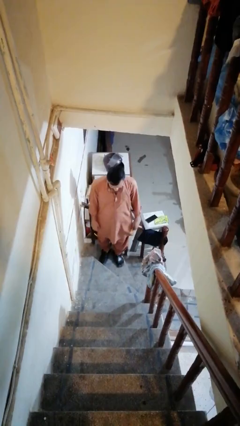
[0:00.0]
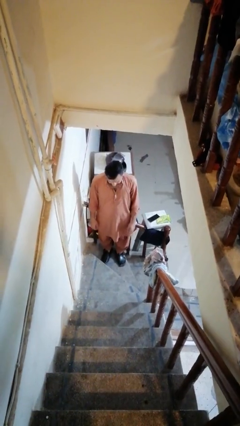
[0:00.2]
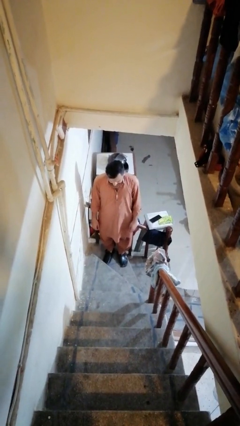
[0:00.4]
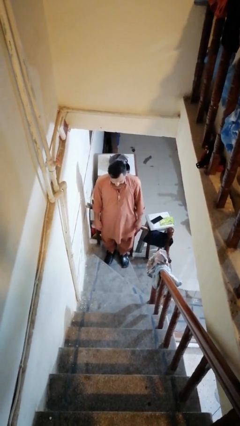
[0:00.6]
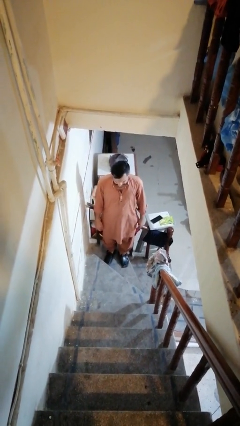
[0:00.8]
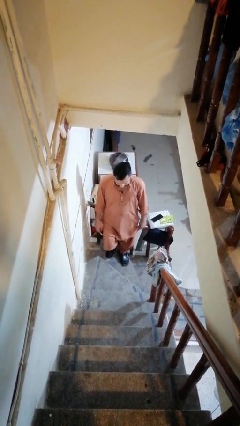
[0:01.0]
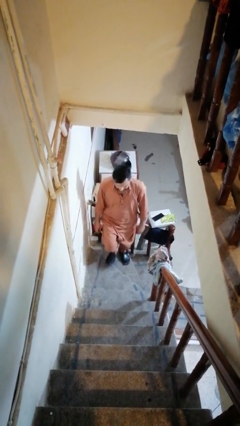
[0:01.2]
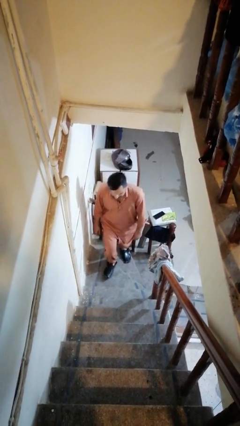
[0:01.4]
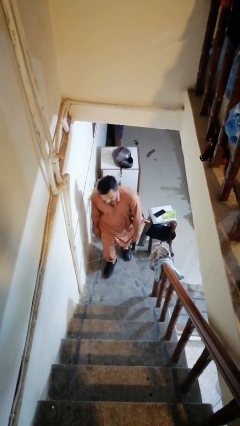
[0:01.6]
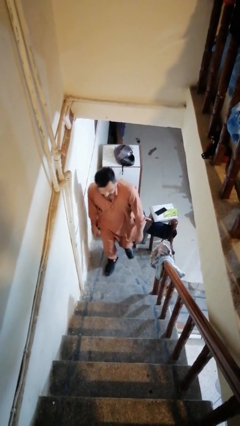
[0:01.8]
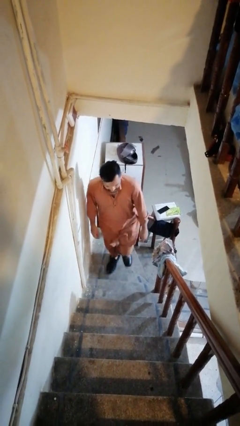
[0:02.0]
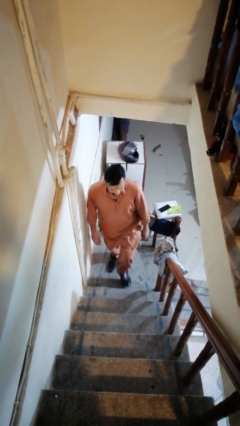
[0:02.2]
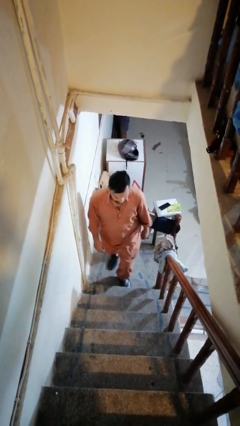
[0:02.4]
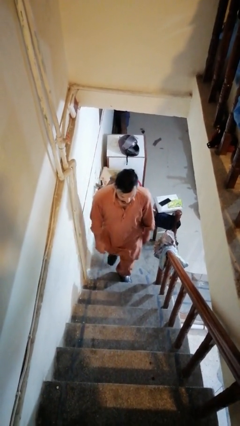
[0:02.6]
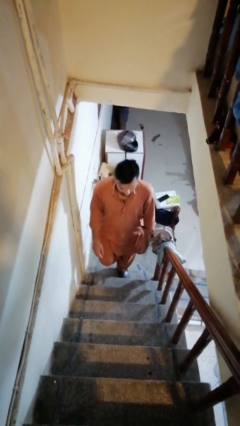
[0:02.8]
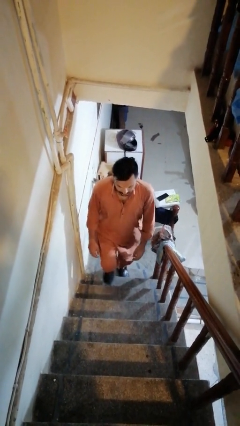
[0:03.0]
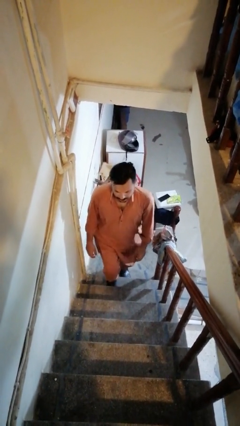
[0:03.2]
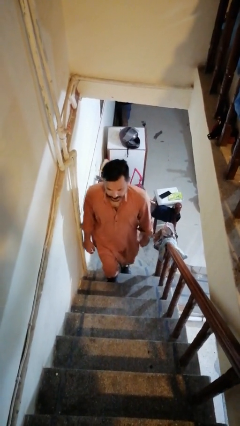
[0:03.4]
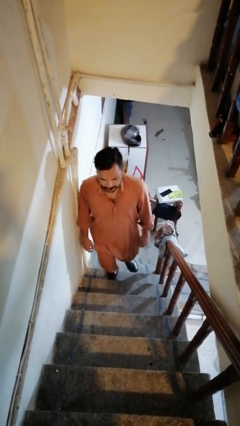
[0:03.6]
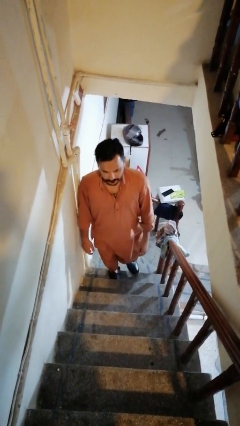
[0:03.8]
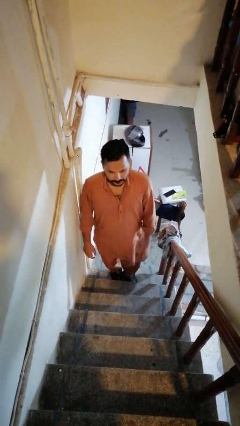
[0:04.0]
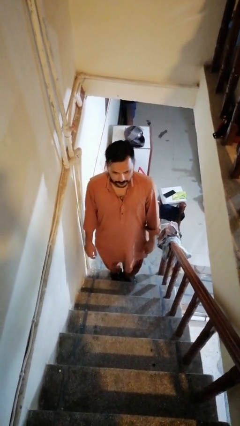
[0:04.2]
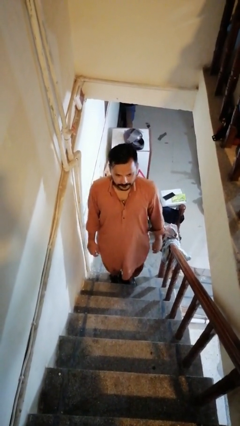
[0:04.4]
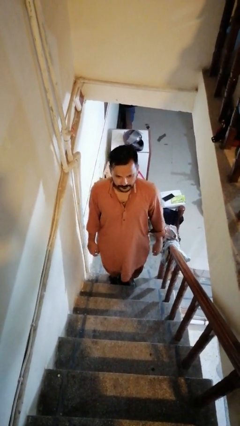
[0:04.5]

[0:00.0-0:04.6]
person climbs up stairs

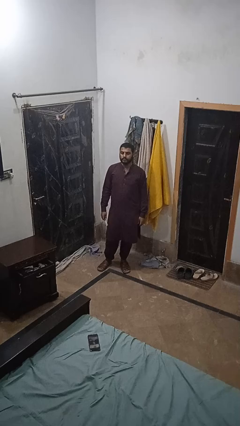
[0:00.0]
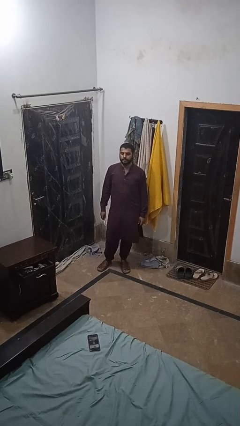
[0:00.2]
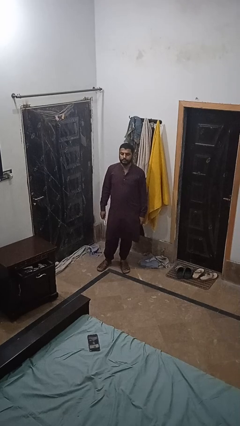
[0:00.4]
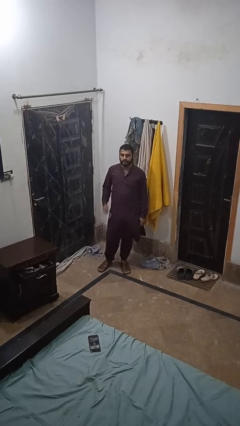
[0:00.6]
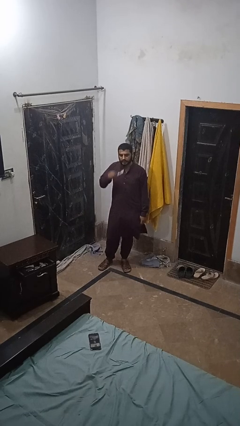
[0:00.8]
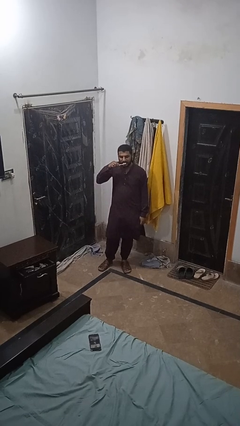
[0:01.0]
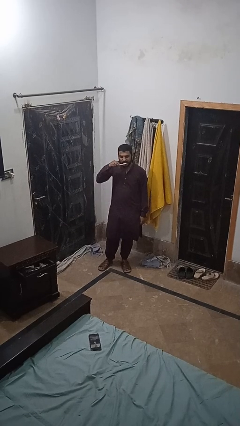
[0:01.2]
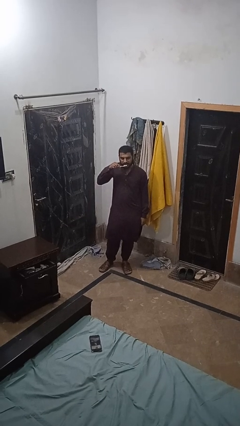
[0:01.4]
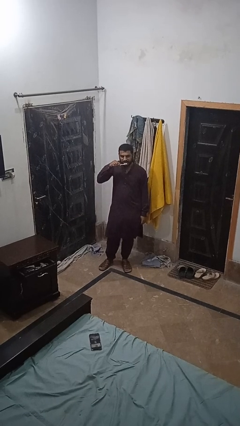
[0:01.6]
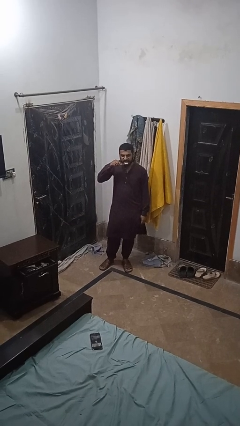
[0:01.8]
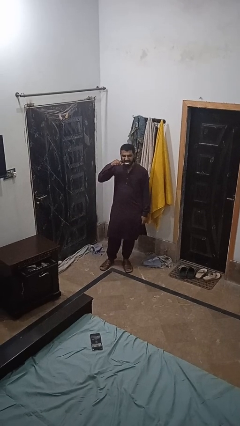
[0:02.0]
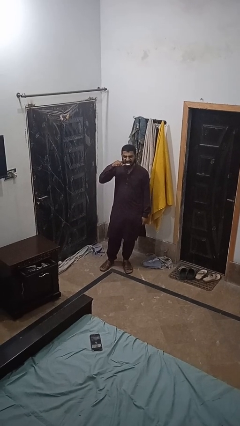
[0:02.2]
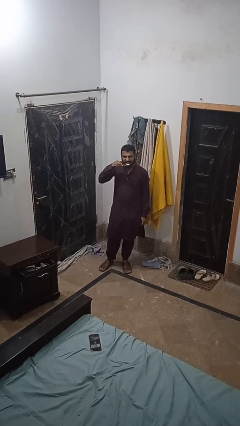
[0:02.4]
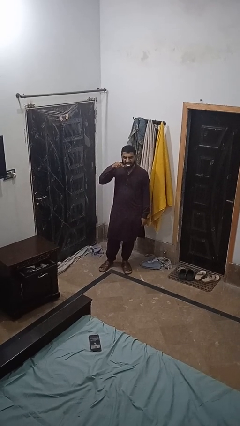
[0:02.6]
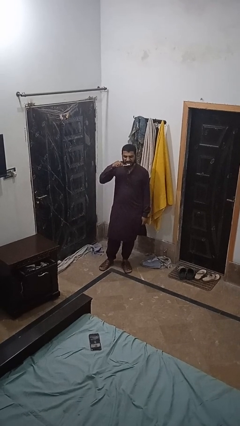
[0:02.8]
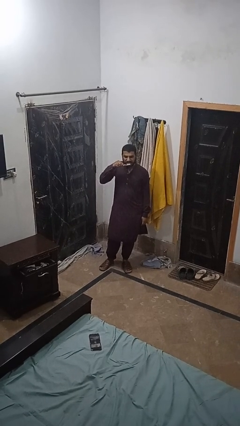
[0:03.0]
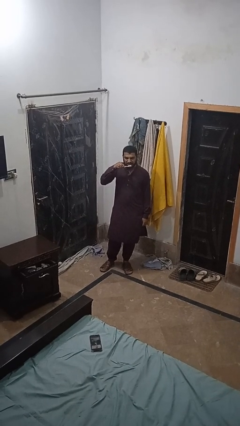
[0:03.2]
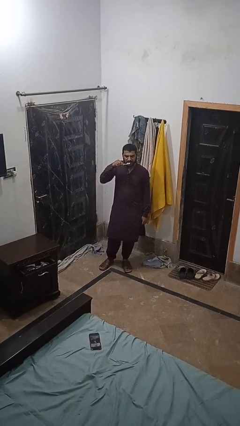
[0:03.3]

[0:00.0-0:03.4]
person brushes teeth

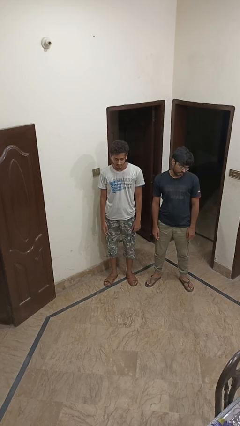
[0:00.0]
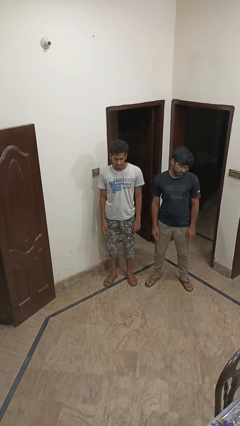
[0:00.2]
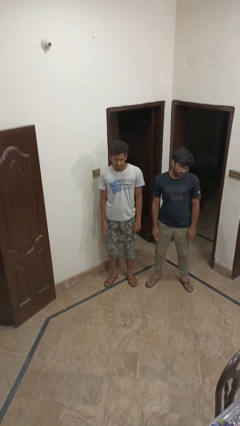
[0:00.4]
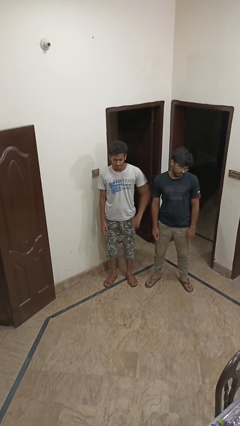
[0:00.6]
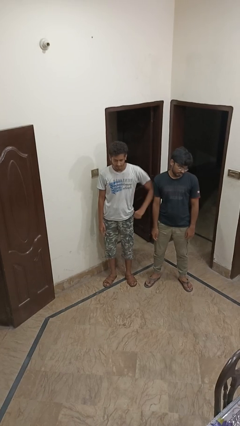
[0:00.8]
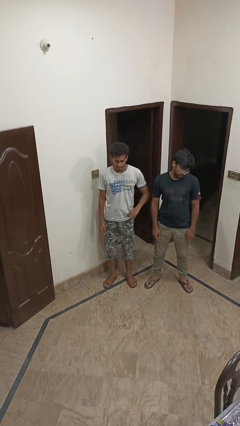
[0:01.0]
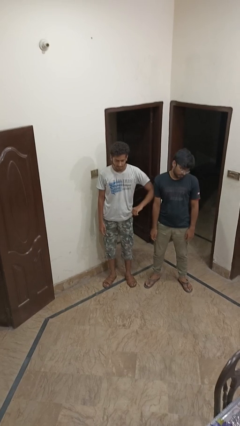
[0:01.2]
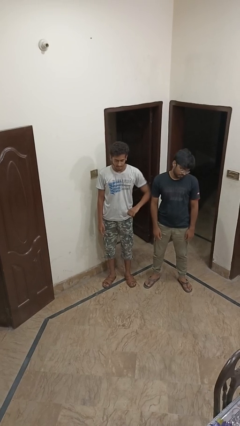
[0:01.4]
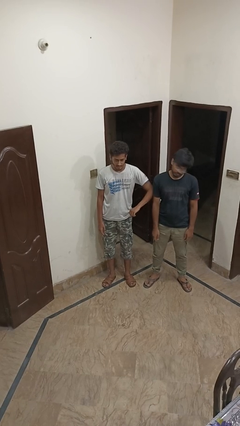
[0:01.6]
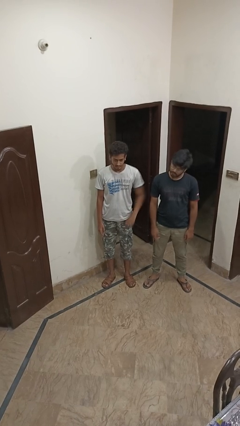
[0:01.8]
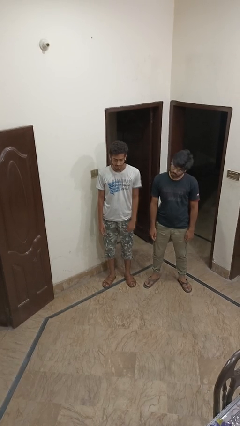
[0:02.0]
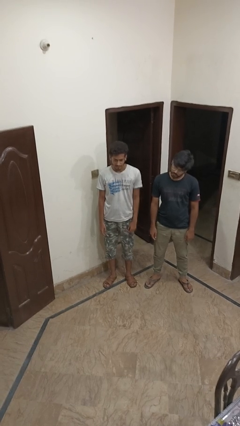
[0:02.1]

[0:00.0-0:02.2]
person nudges person with elbow

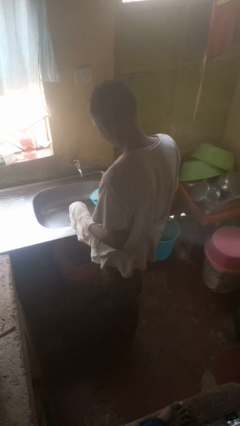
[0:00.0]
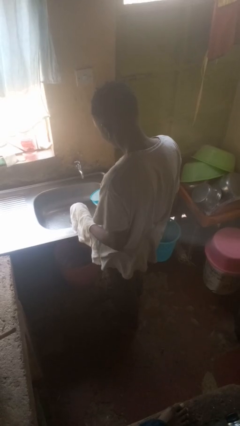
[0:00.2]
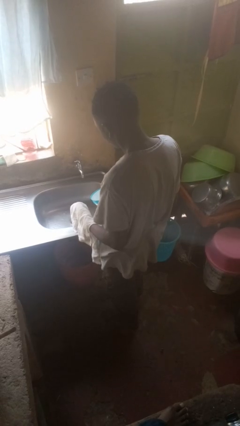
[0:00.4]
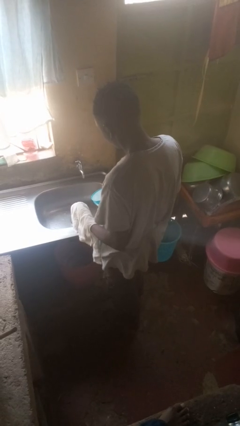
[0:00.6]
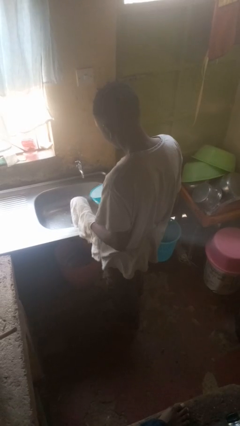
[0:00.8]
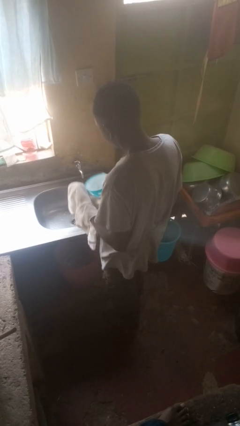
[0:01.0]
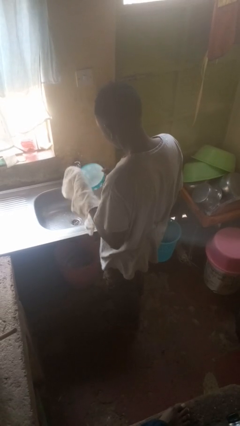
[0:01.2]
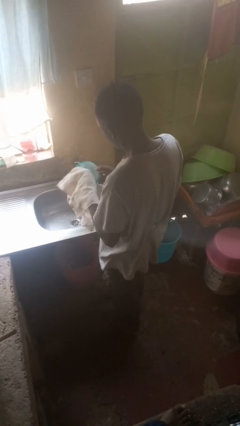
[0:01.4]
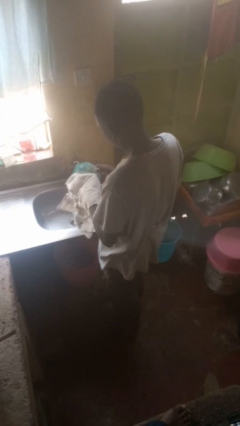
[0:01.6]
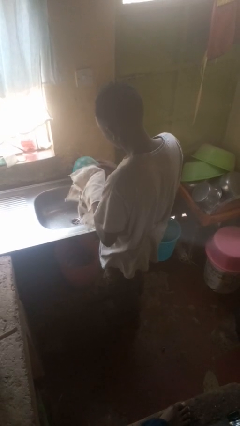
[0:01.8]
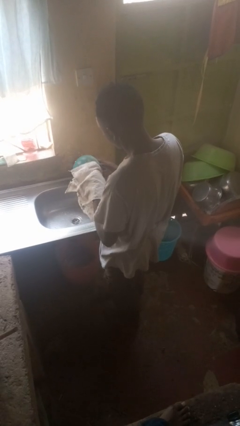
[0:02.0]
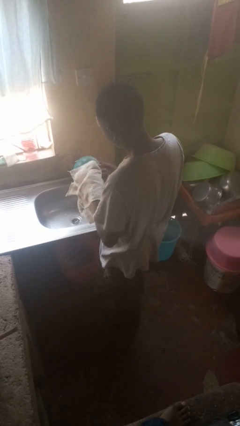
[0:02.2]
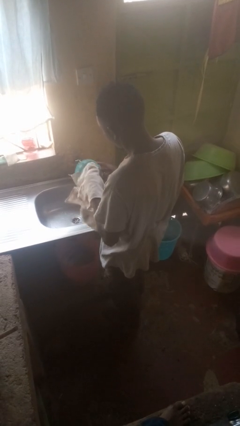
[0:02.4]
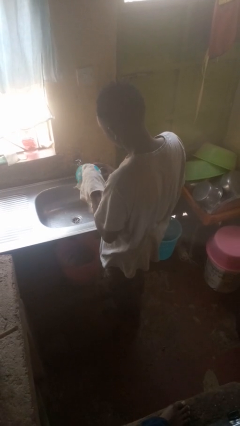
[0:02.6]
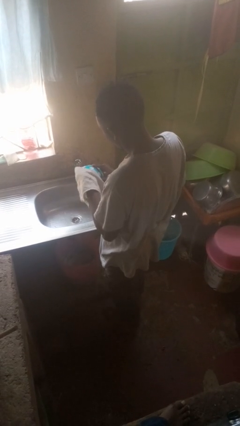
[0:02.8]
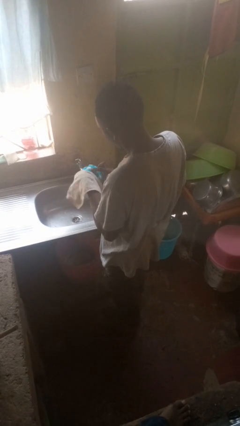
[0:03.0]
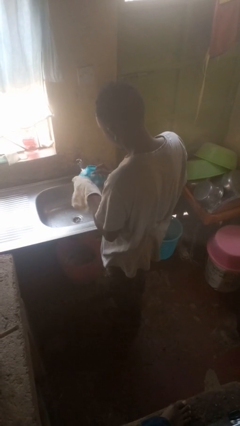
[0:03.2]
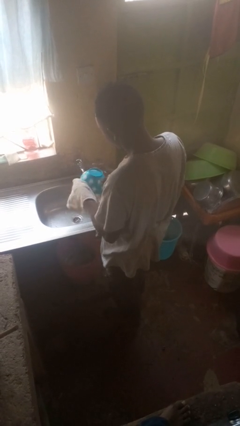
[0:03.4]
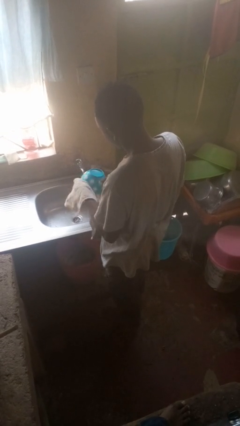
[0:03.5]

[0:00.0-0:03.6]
person dries dish

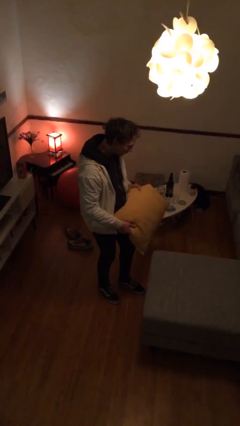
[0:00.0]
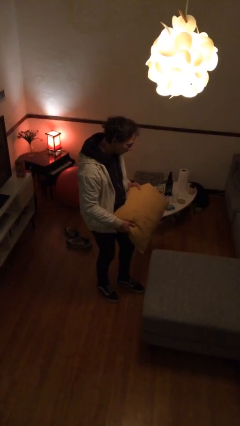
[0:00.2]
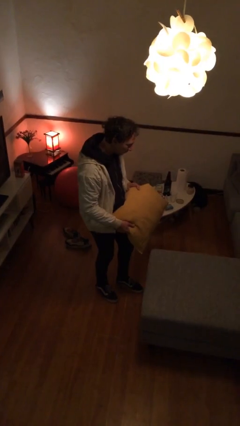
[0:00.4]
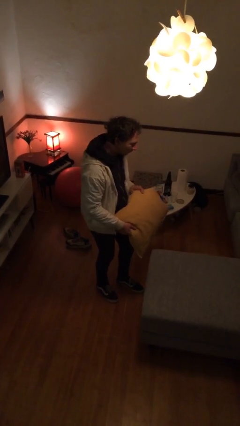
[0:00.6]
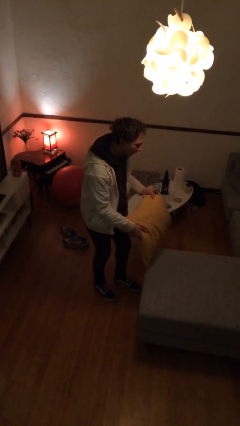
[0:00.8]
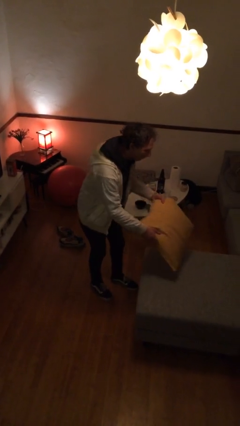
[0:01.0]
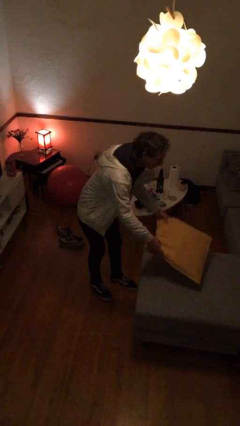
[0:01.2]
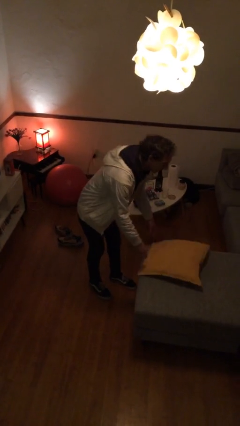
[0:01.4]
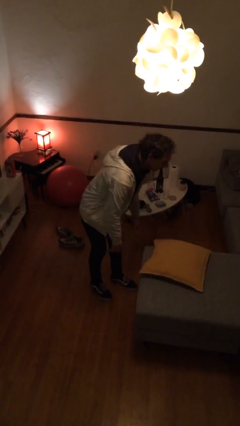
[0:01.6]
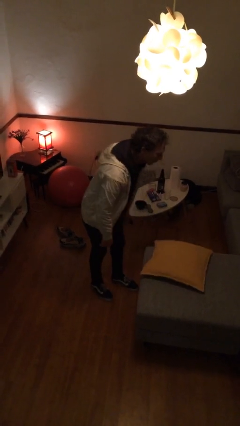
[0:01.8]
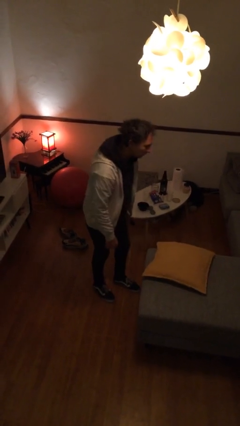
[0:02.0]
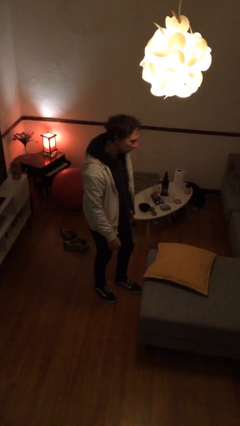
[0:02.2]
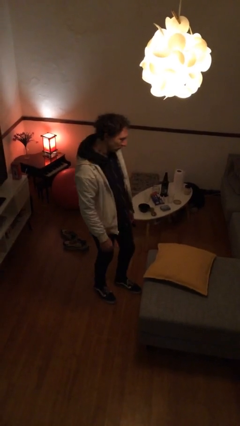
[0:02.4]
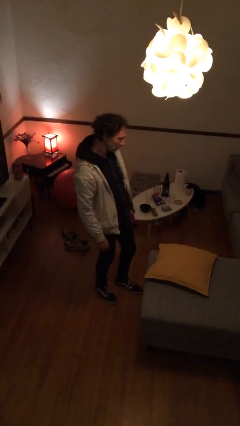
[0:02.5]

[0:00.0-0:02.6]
person puts down object on couch

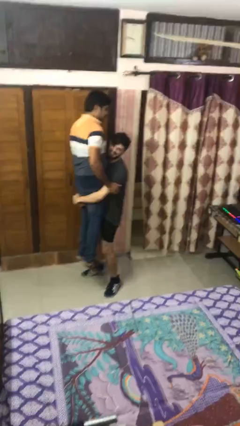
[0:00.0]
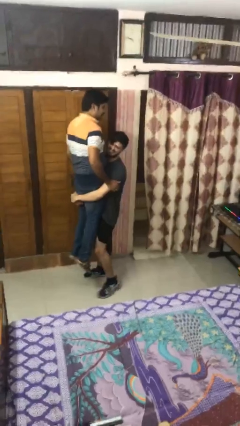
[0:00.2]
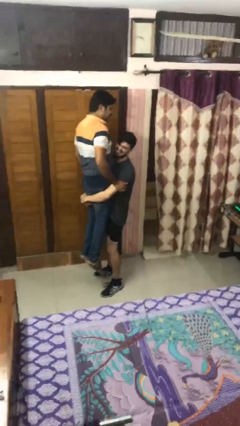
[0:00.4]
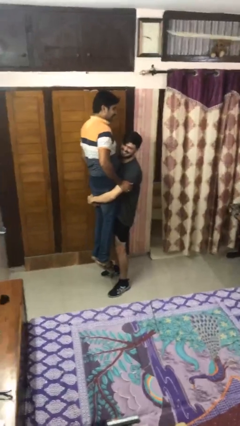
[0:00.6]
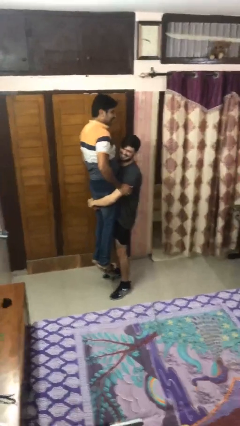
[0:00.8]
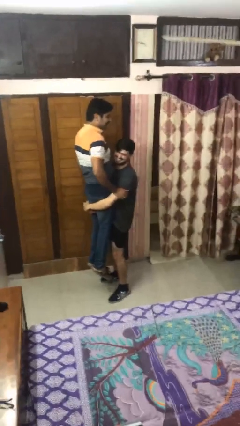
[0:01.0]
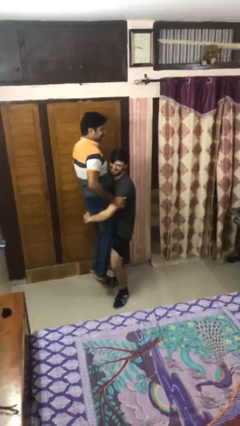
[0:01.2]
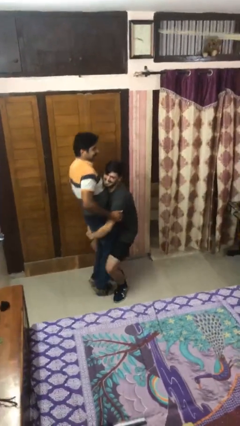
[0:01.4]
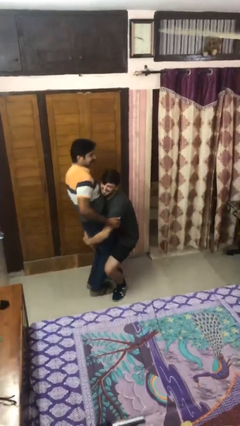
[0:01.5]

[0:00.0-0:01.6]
person puts down person
